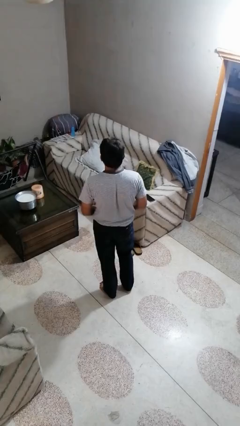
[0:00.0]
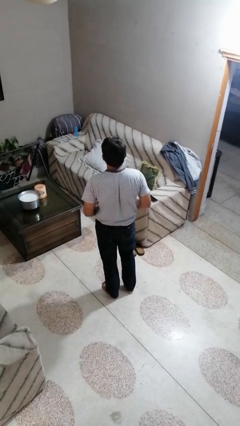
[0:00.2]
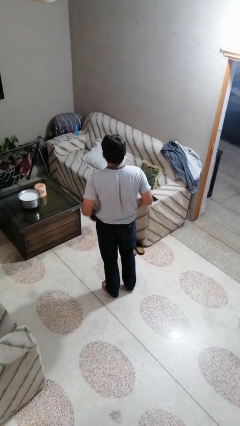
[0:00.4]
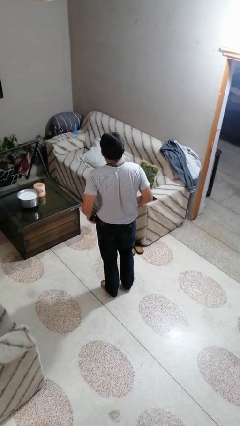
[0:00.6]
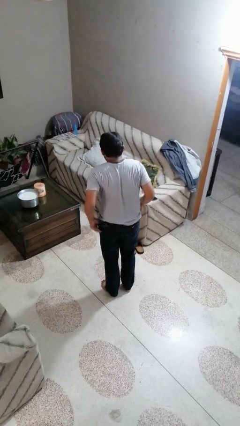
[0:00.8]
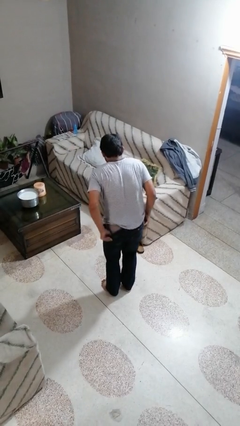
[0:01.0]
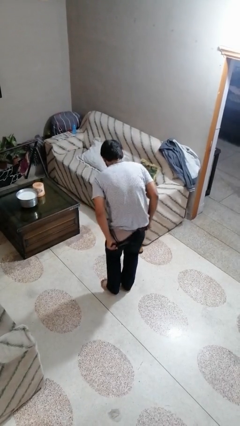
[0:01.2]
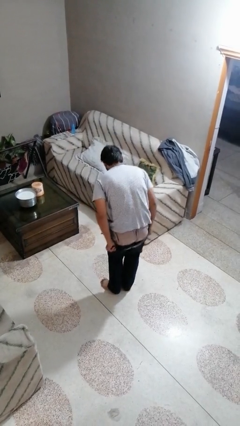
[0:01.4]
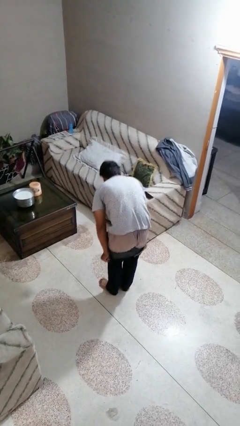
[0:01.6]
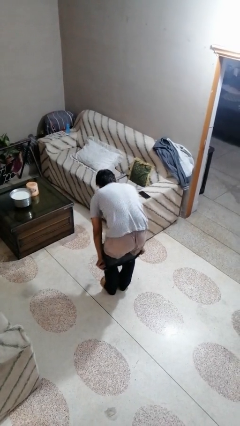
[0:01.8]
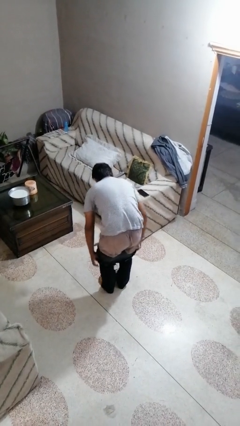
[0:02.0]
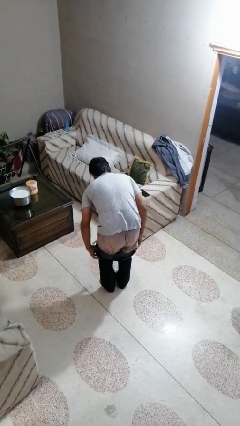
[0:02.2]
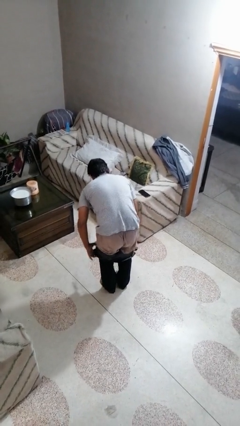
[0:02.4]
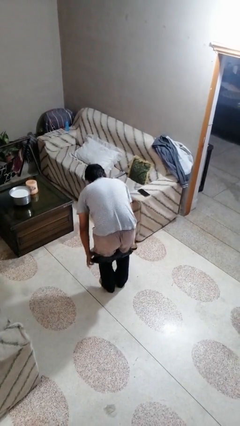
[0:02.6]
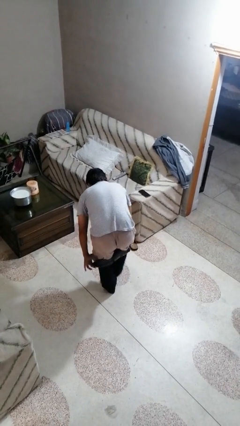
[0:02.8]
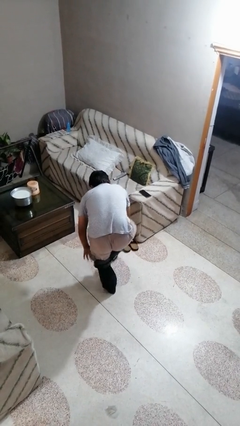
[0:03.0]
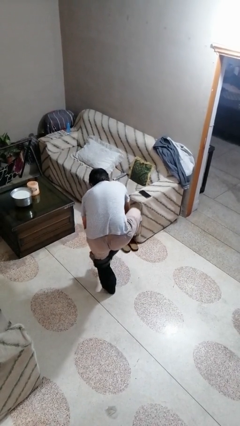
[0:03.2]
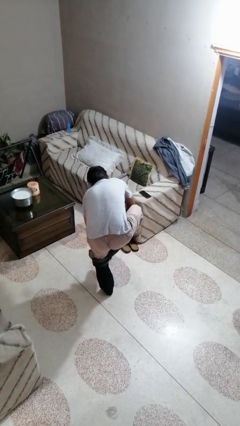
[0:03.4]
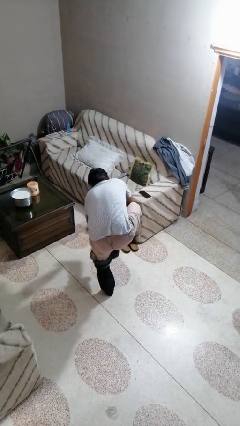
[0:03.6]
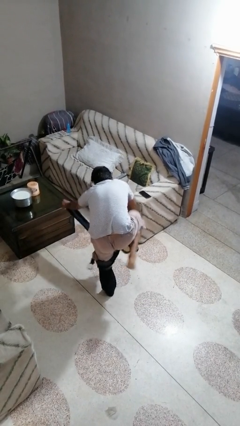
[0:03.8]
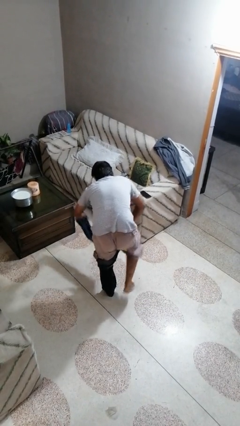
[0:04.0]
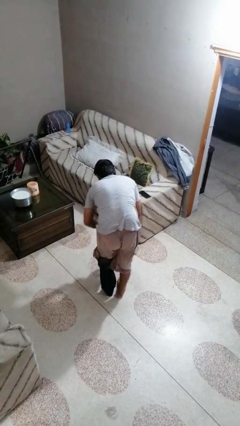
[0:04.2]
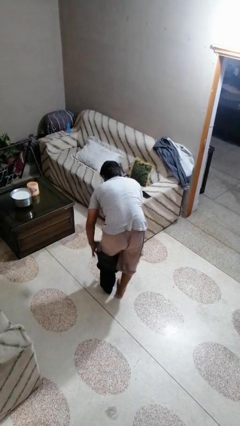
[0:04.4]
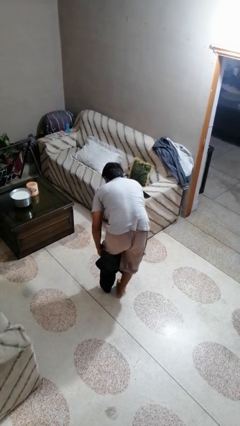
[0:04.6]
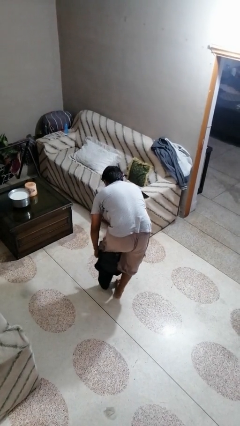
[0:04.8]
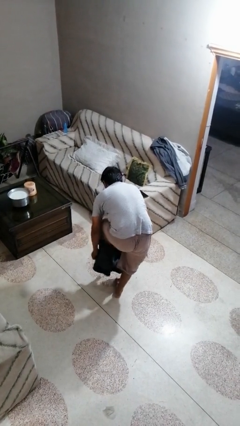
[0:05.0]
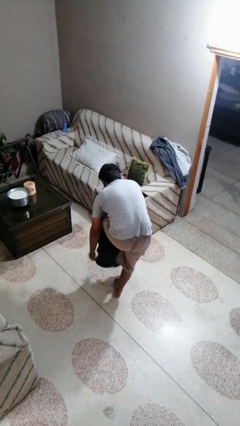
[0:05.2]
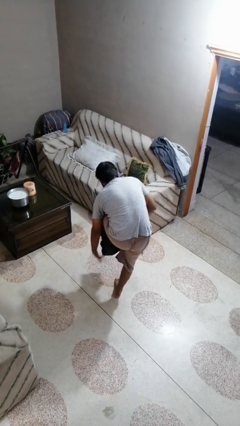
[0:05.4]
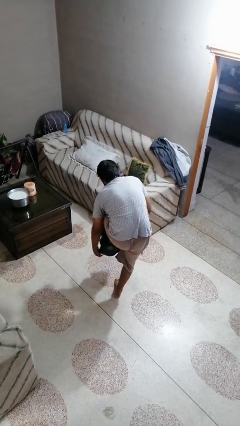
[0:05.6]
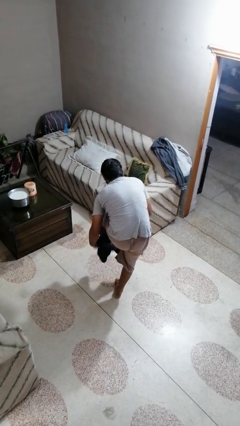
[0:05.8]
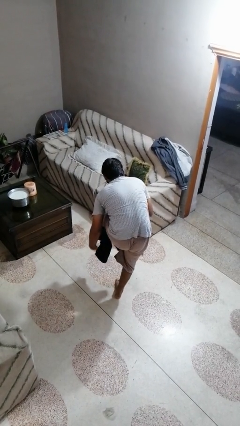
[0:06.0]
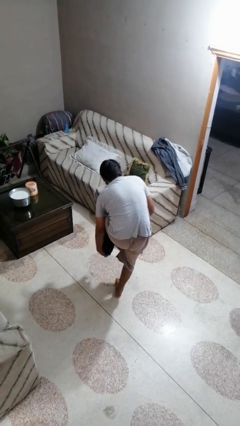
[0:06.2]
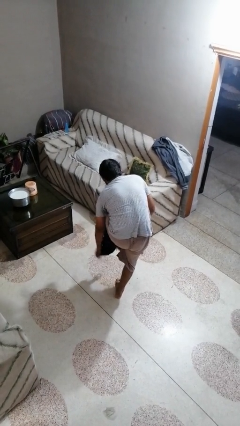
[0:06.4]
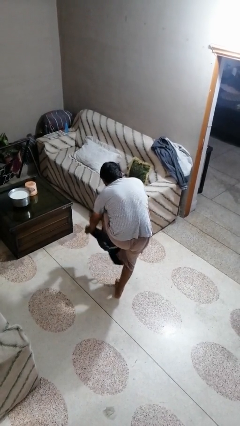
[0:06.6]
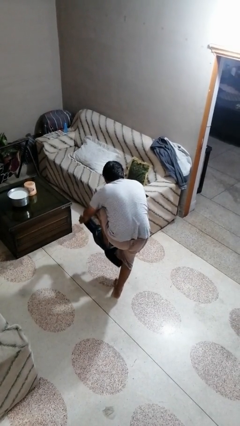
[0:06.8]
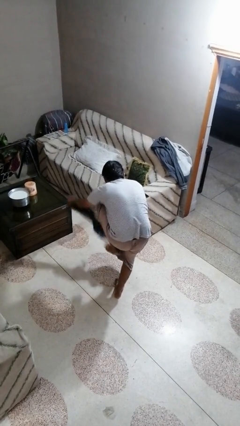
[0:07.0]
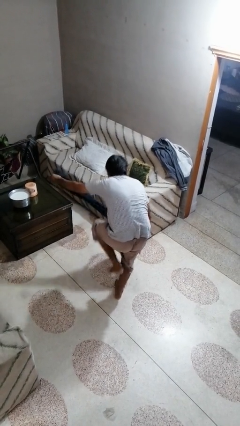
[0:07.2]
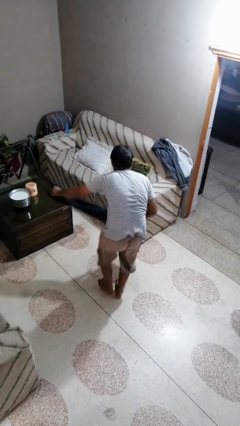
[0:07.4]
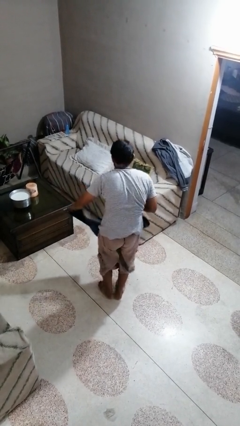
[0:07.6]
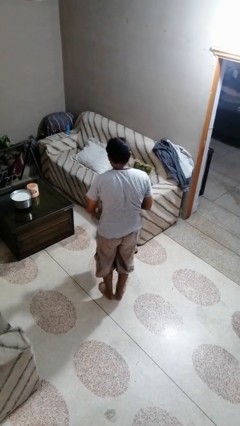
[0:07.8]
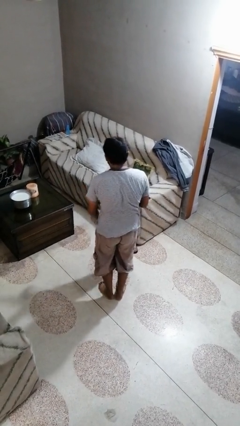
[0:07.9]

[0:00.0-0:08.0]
person takes off pants

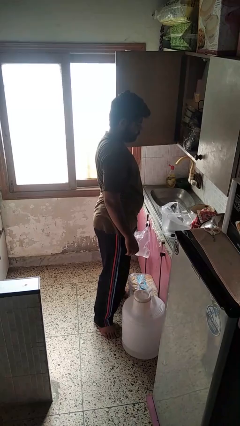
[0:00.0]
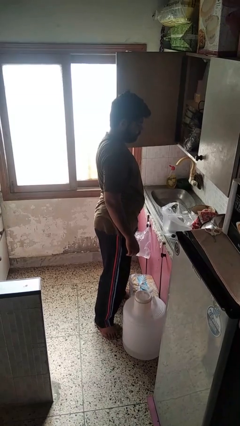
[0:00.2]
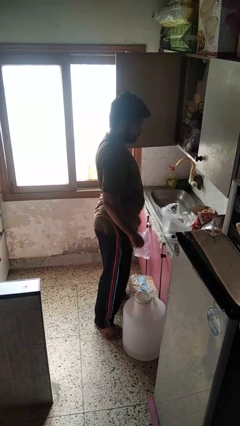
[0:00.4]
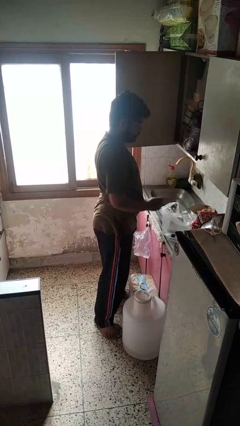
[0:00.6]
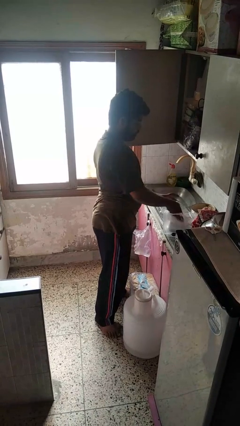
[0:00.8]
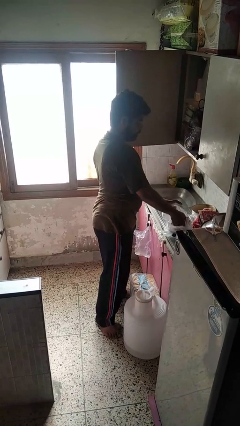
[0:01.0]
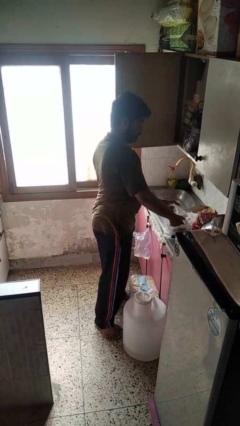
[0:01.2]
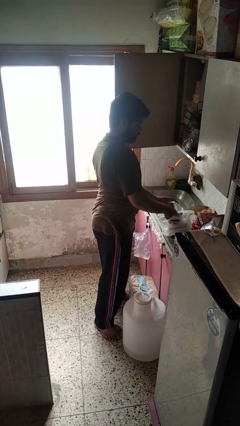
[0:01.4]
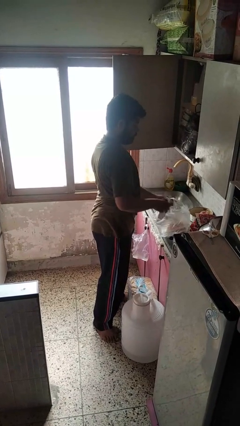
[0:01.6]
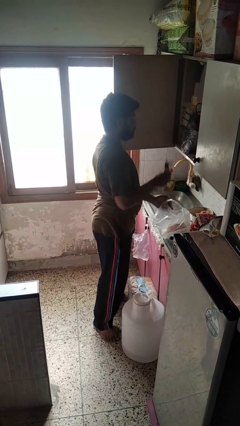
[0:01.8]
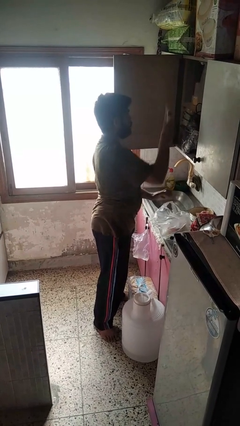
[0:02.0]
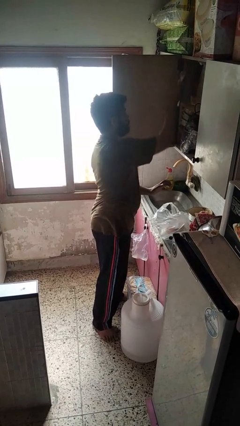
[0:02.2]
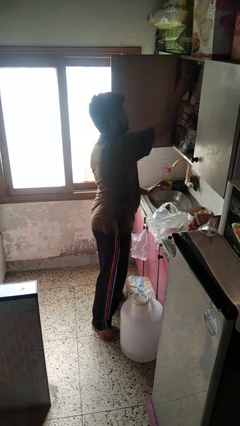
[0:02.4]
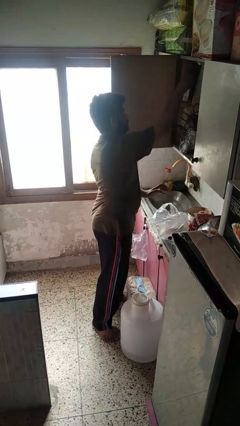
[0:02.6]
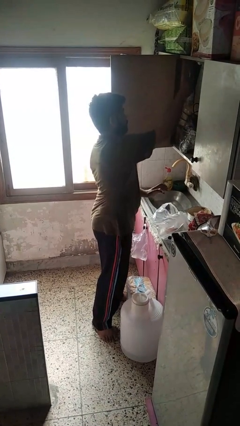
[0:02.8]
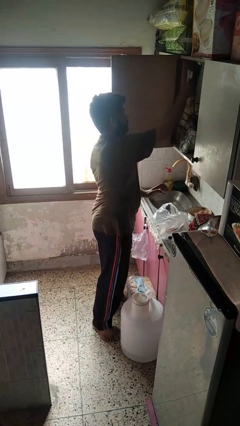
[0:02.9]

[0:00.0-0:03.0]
person loads groceries into cabinet

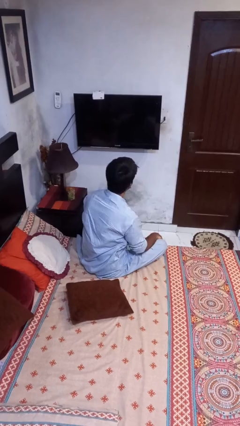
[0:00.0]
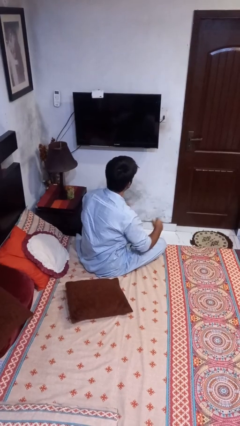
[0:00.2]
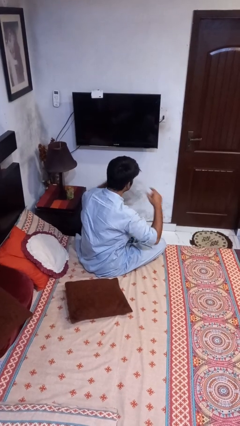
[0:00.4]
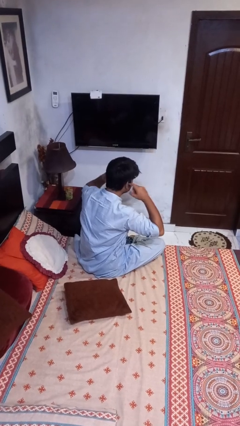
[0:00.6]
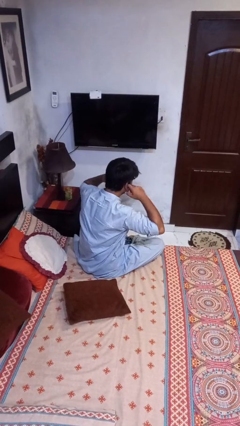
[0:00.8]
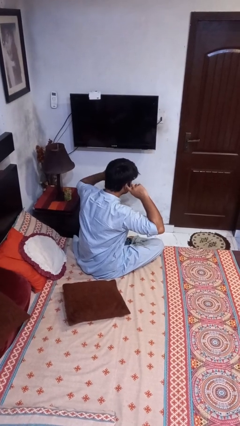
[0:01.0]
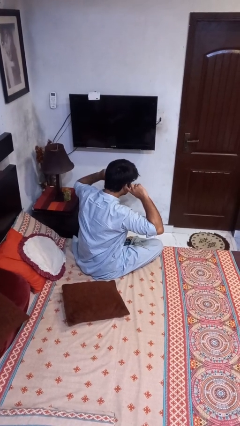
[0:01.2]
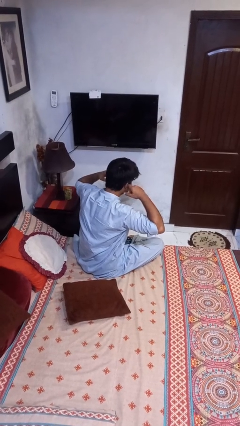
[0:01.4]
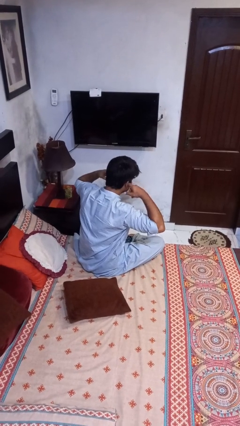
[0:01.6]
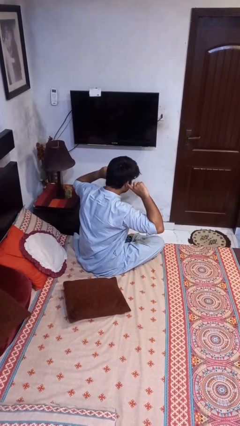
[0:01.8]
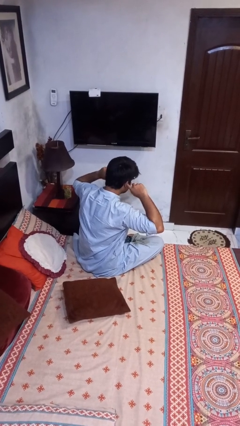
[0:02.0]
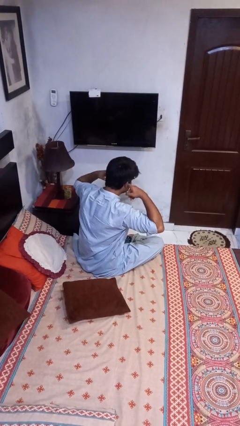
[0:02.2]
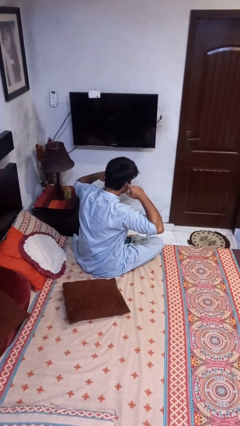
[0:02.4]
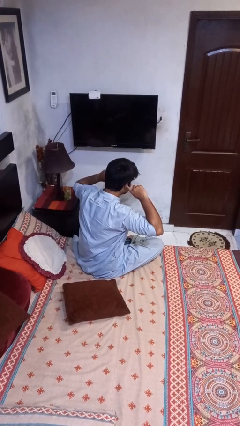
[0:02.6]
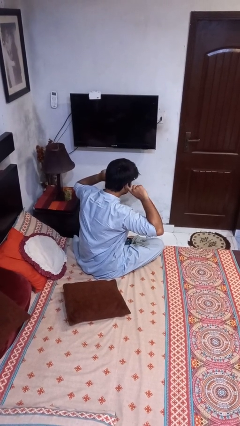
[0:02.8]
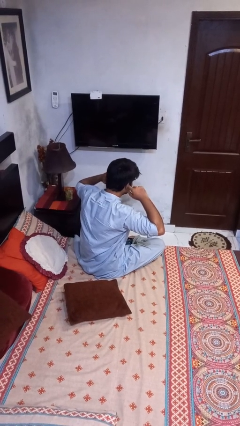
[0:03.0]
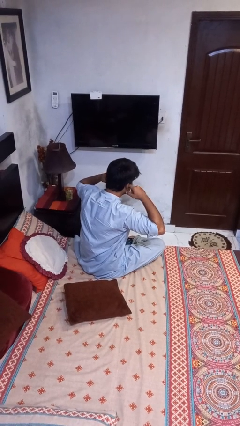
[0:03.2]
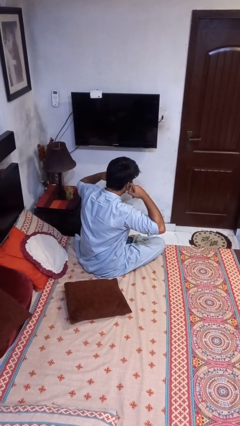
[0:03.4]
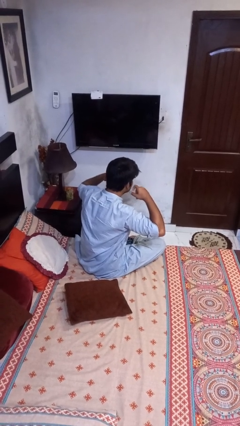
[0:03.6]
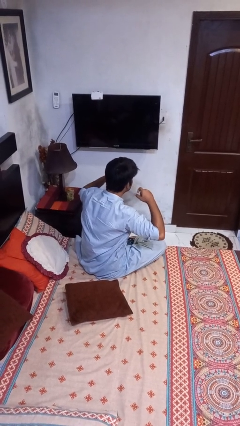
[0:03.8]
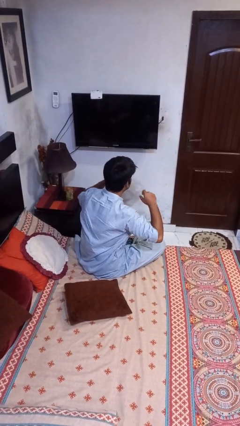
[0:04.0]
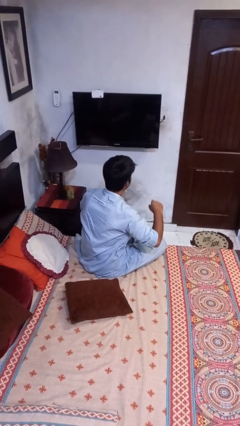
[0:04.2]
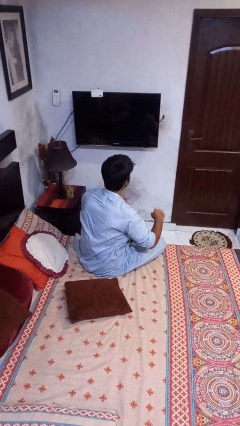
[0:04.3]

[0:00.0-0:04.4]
person puts fingers in ear

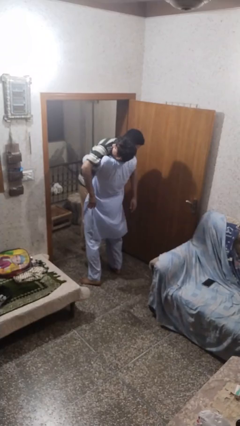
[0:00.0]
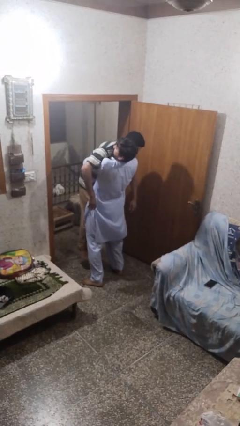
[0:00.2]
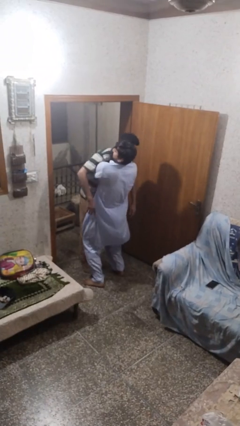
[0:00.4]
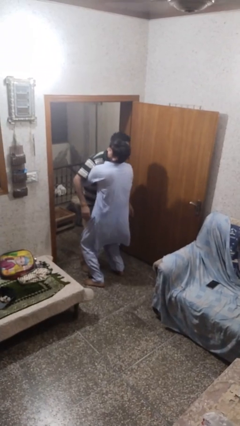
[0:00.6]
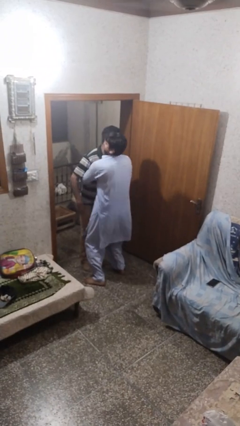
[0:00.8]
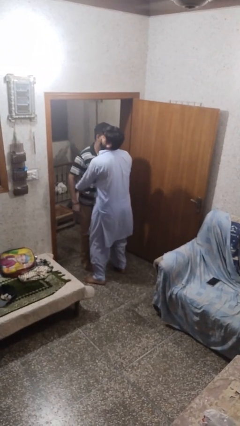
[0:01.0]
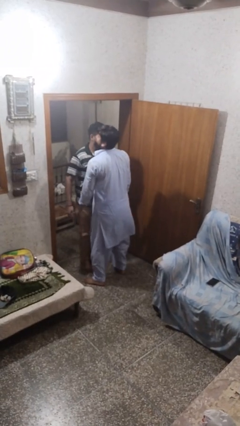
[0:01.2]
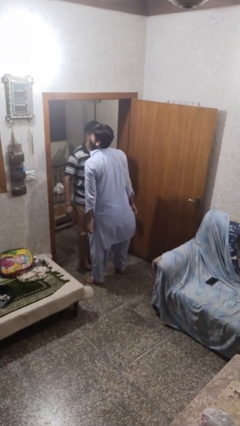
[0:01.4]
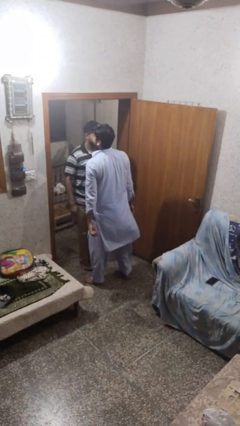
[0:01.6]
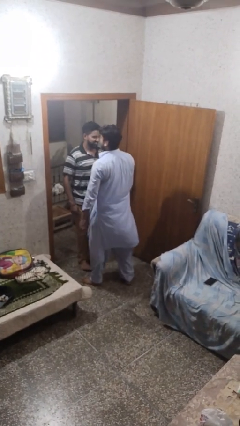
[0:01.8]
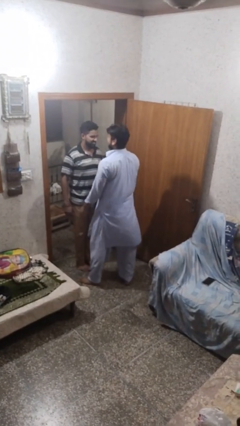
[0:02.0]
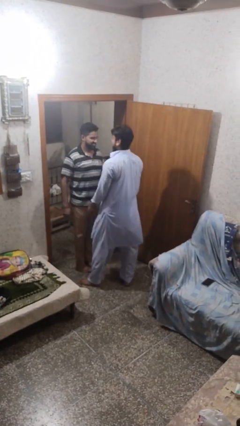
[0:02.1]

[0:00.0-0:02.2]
person puts down person

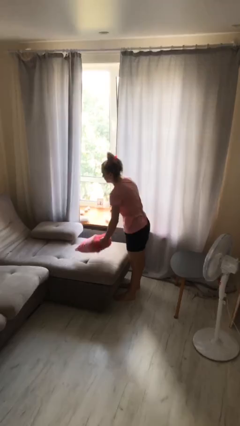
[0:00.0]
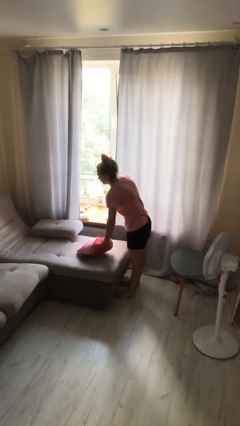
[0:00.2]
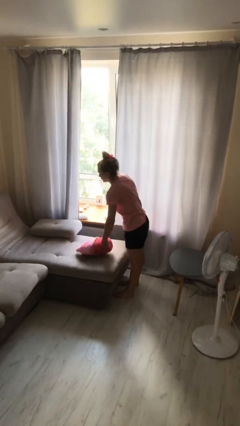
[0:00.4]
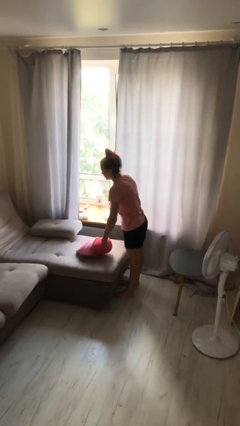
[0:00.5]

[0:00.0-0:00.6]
person puts down object on couch
